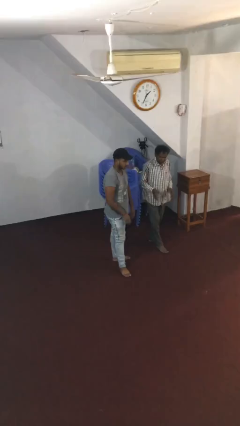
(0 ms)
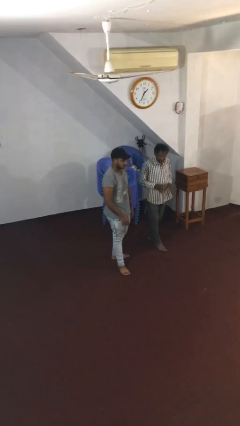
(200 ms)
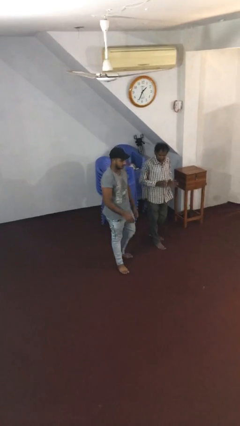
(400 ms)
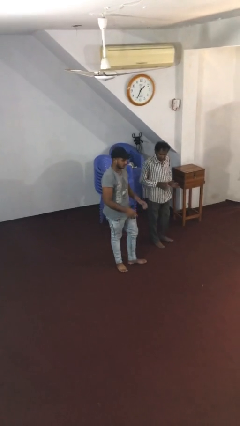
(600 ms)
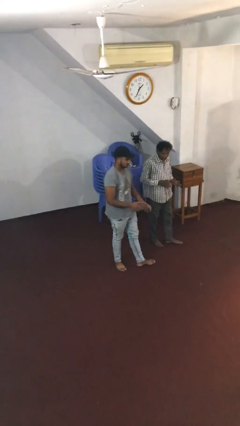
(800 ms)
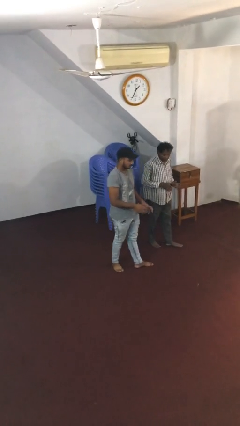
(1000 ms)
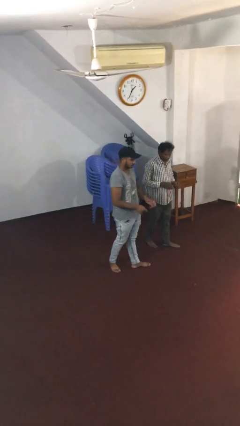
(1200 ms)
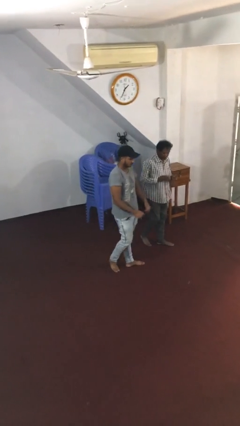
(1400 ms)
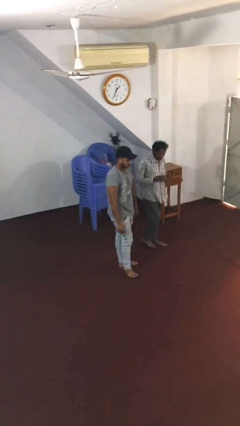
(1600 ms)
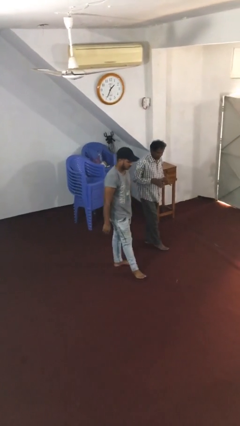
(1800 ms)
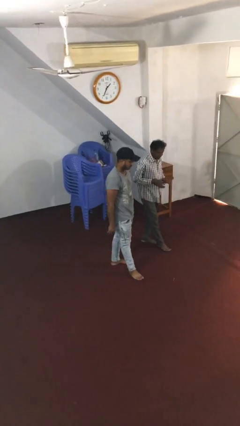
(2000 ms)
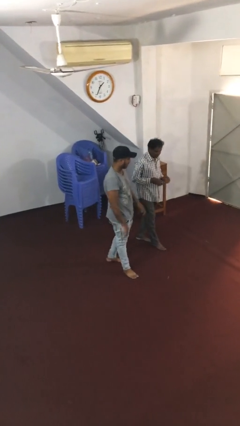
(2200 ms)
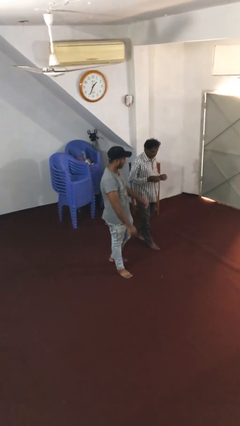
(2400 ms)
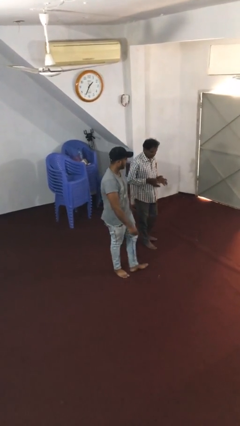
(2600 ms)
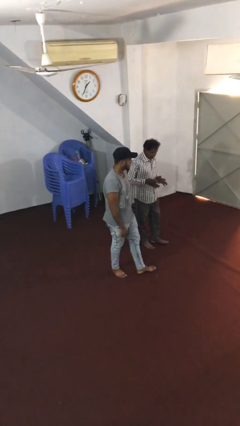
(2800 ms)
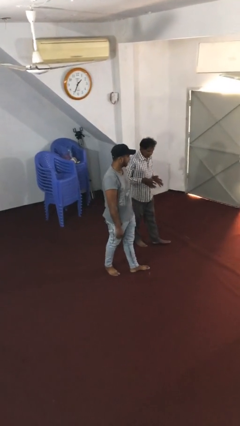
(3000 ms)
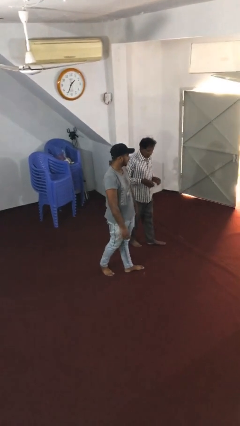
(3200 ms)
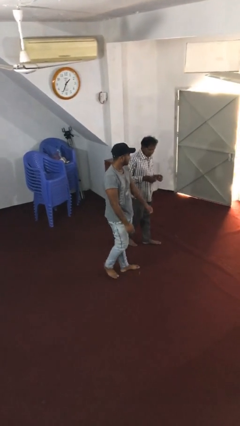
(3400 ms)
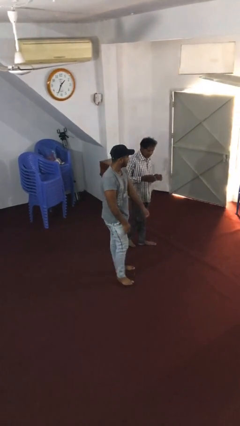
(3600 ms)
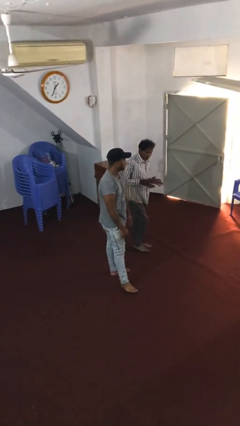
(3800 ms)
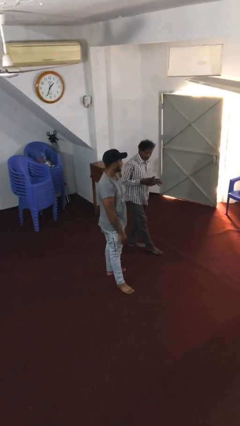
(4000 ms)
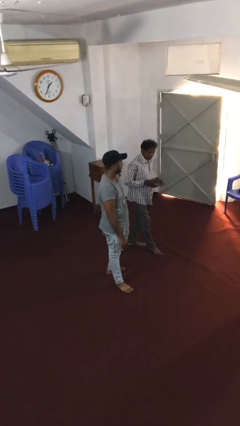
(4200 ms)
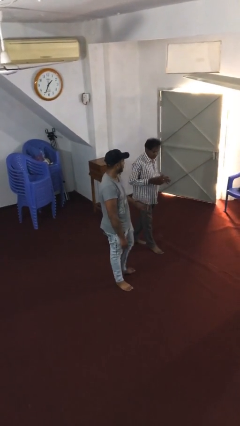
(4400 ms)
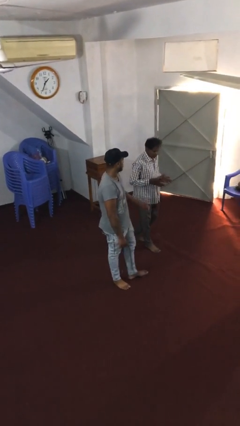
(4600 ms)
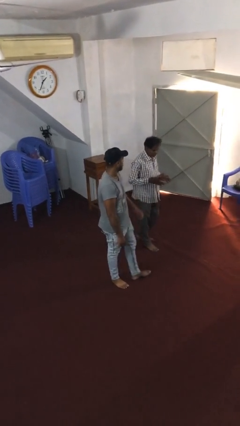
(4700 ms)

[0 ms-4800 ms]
person talks to person

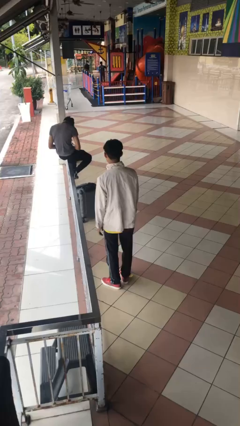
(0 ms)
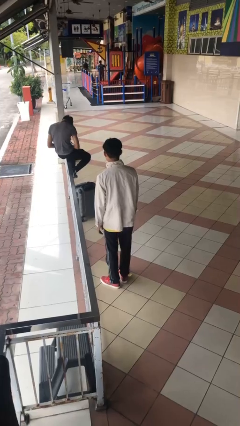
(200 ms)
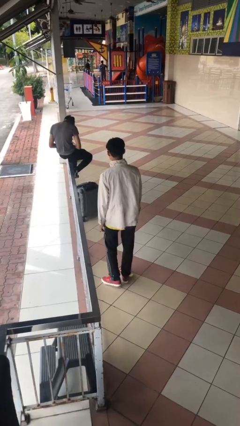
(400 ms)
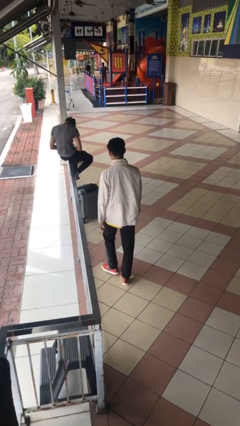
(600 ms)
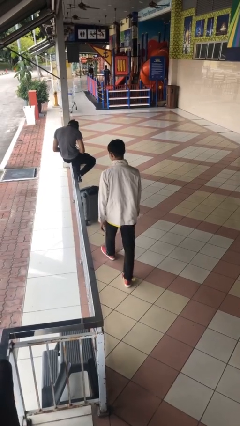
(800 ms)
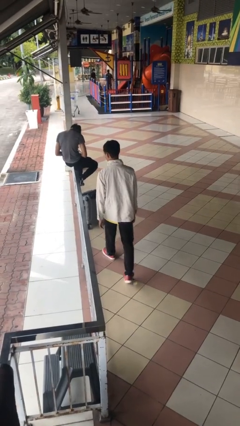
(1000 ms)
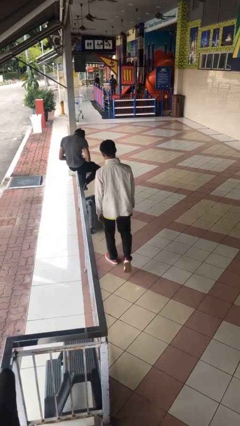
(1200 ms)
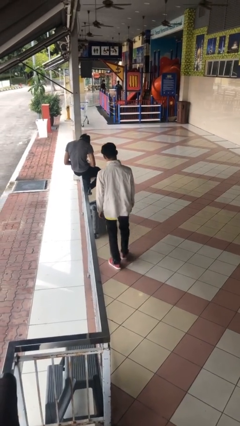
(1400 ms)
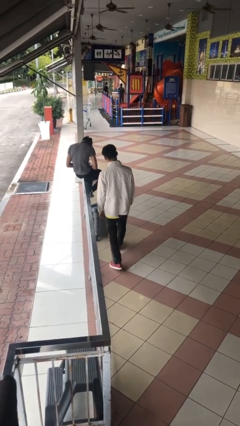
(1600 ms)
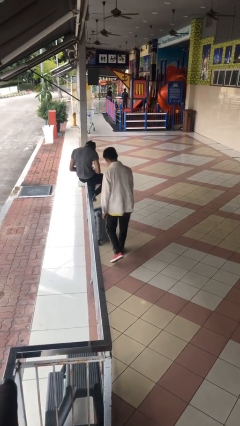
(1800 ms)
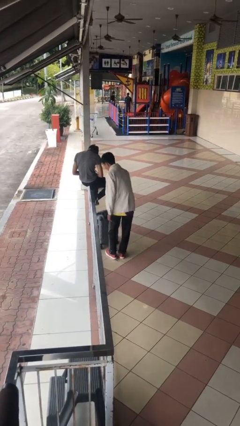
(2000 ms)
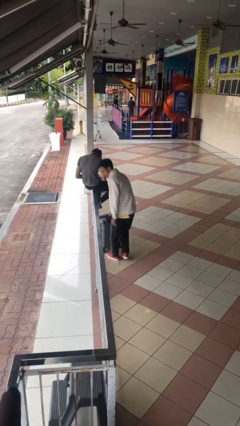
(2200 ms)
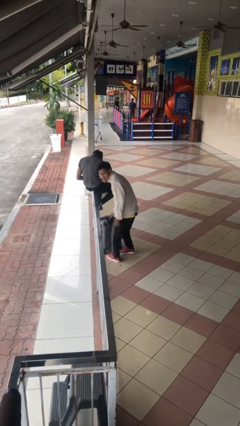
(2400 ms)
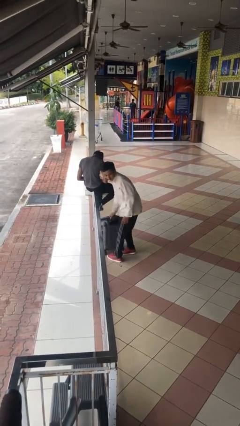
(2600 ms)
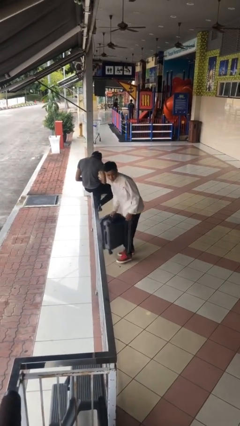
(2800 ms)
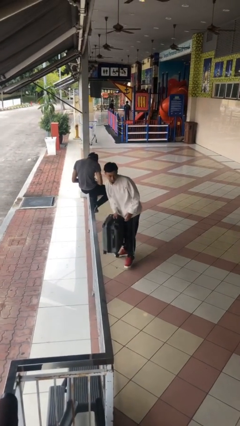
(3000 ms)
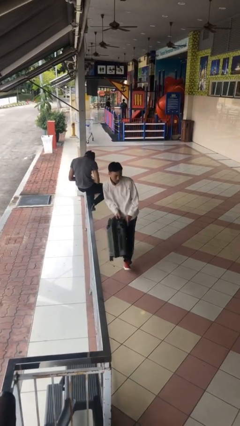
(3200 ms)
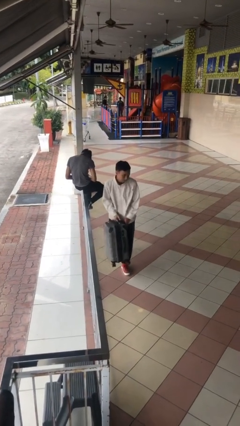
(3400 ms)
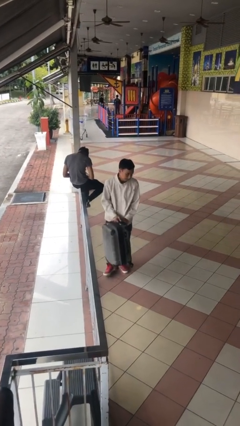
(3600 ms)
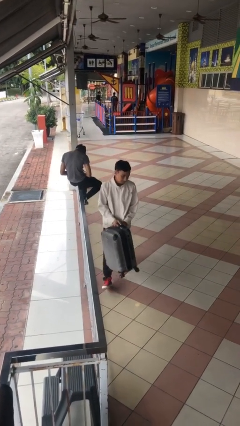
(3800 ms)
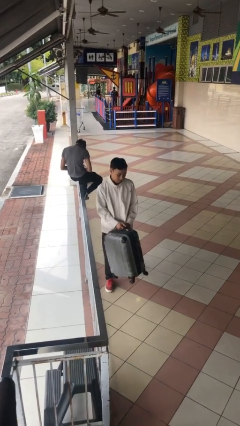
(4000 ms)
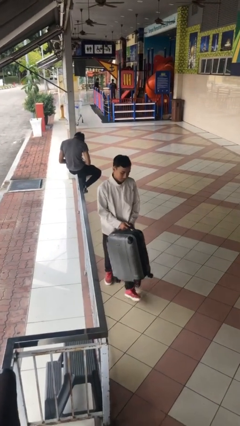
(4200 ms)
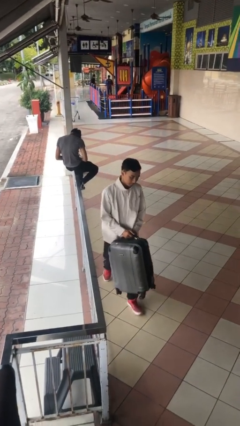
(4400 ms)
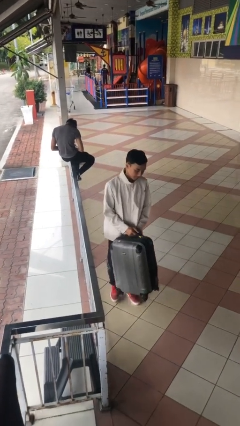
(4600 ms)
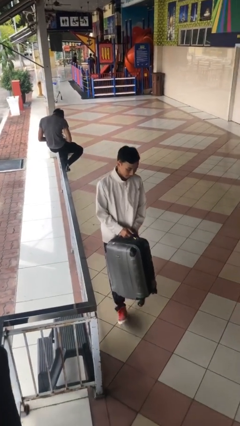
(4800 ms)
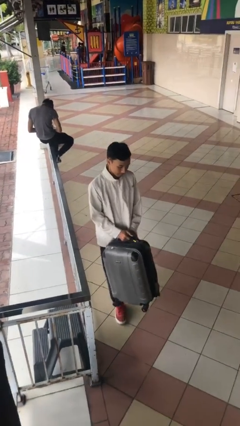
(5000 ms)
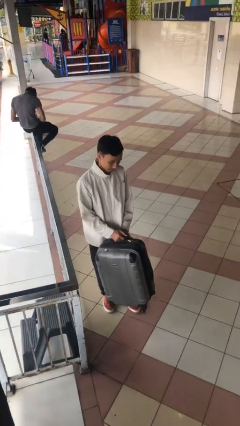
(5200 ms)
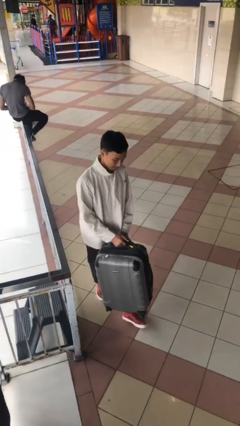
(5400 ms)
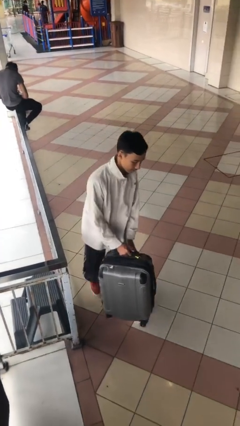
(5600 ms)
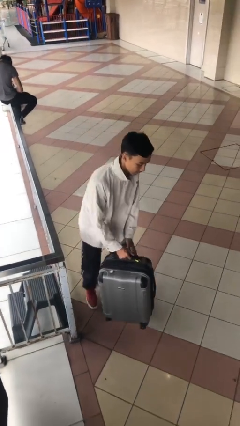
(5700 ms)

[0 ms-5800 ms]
person steals object from person

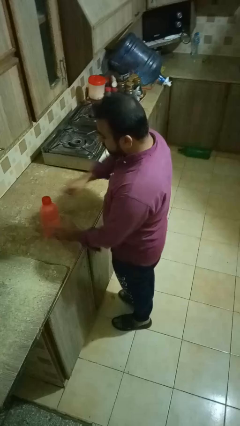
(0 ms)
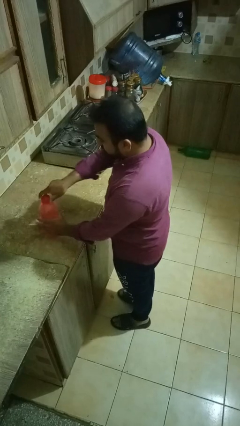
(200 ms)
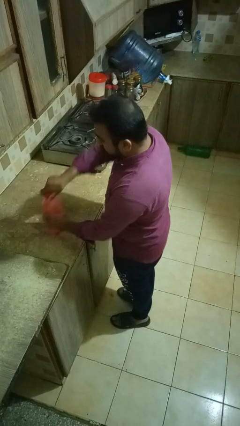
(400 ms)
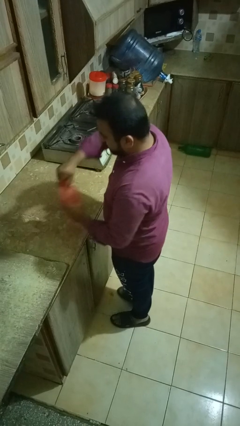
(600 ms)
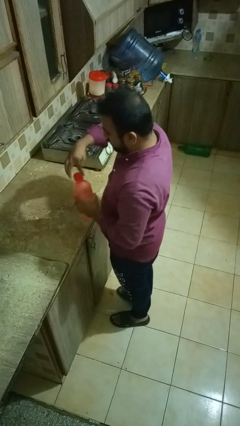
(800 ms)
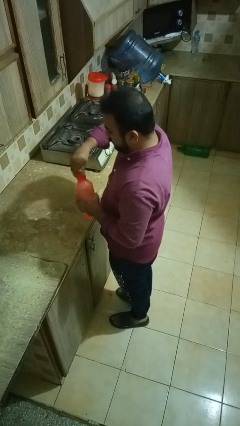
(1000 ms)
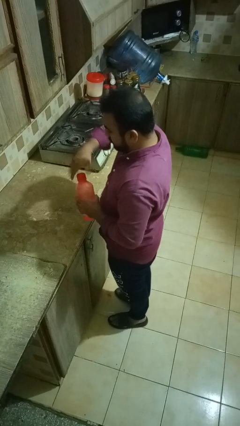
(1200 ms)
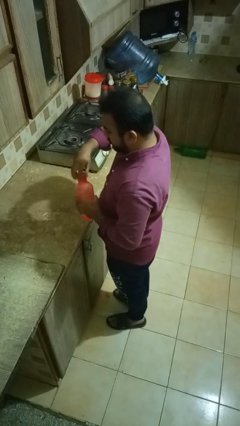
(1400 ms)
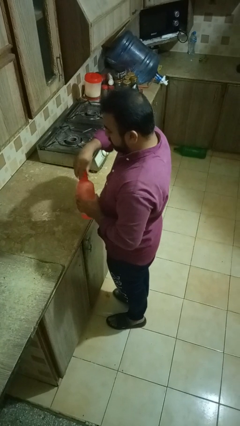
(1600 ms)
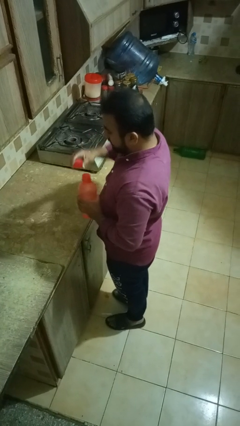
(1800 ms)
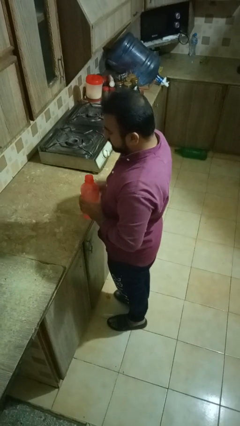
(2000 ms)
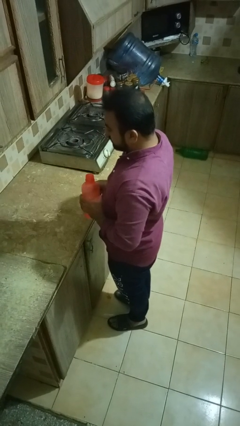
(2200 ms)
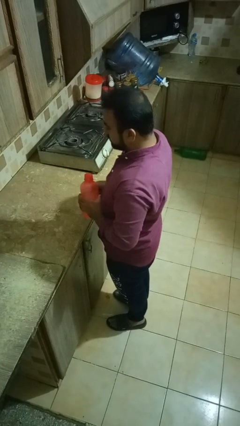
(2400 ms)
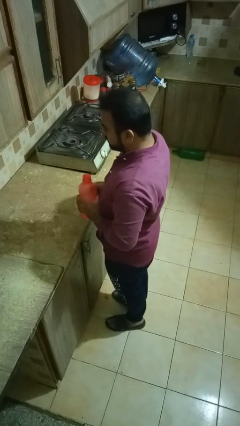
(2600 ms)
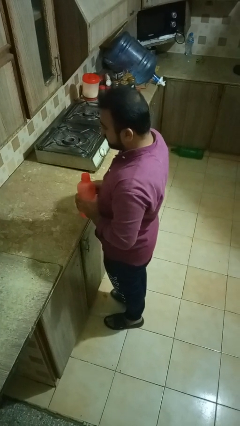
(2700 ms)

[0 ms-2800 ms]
person unscrews lid from bottle

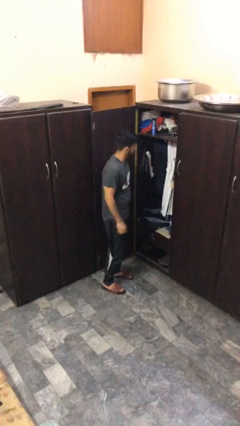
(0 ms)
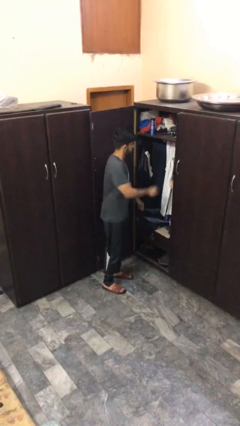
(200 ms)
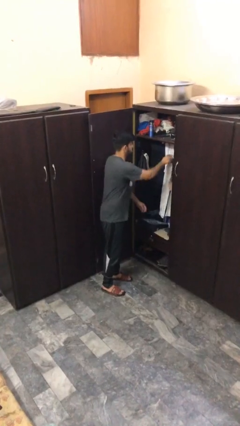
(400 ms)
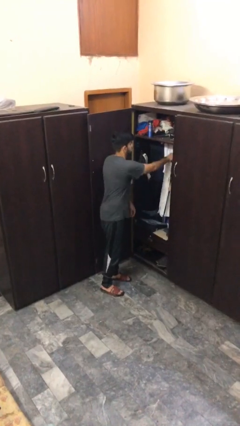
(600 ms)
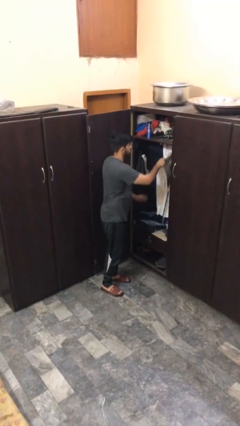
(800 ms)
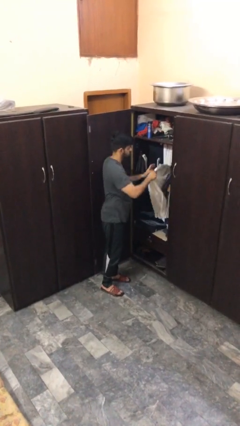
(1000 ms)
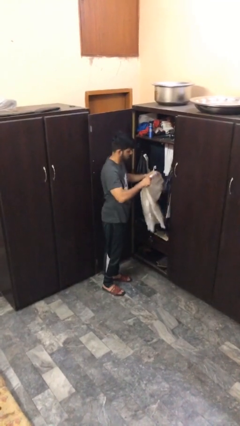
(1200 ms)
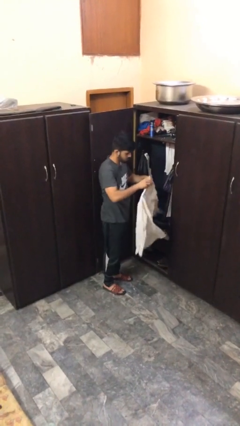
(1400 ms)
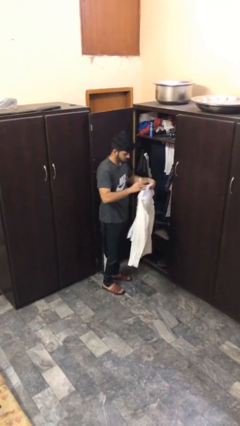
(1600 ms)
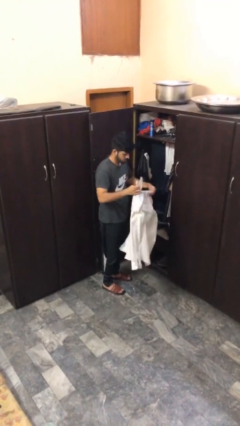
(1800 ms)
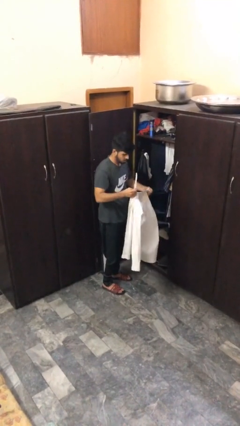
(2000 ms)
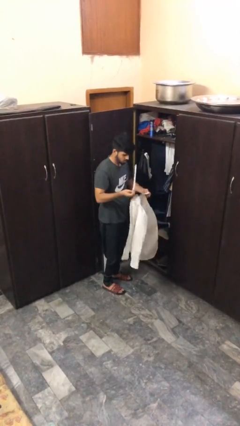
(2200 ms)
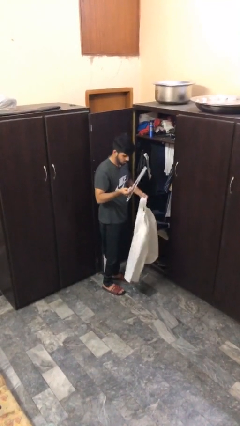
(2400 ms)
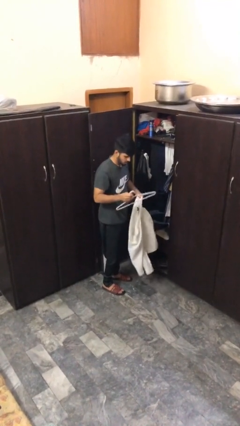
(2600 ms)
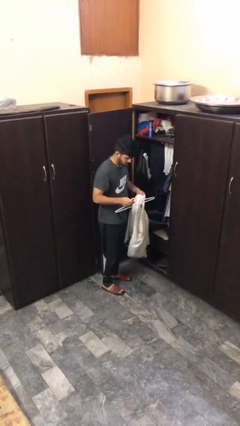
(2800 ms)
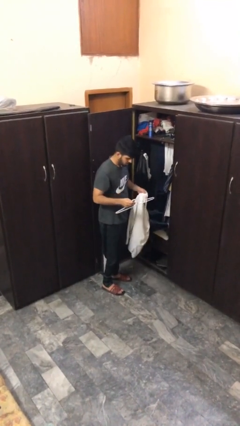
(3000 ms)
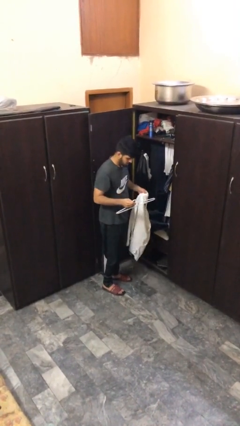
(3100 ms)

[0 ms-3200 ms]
person takes clothes from closet

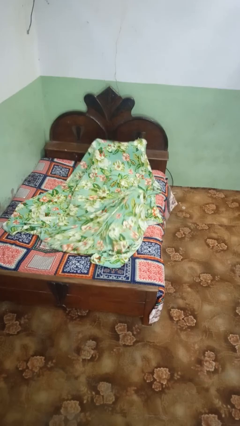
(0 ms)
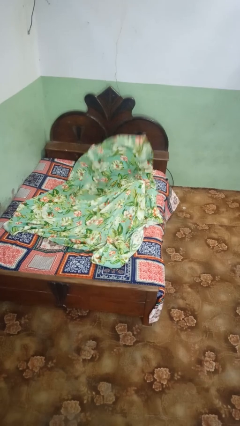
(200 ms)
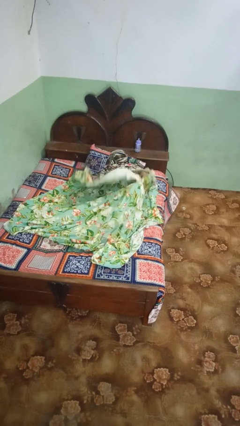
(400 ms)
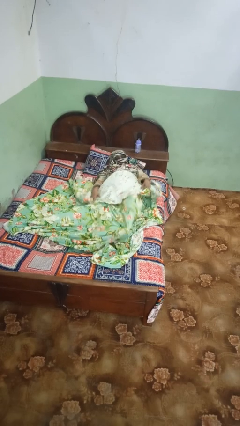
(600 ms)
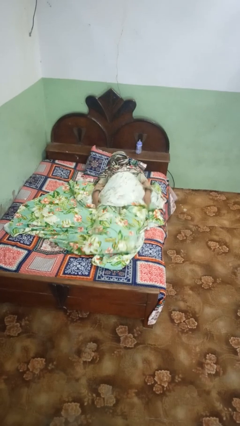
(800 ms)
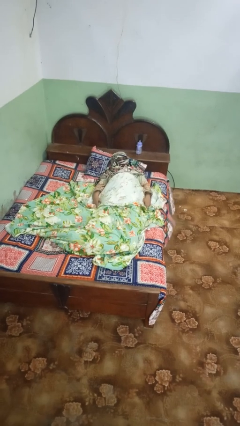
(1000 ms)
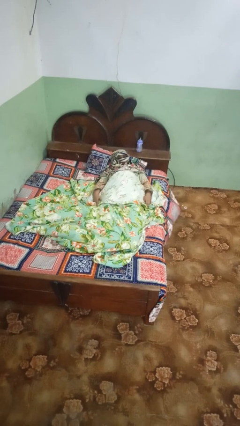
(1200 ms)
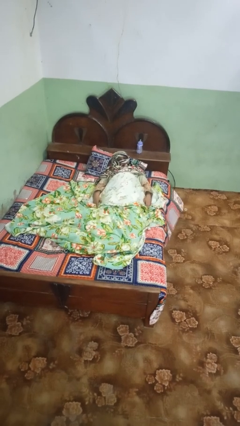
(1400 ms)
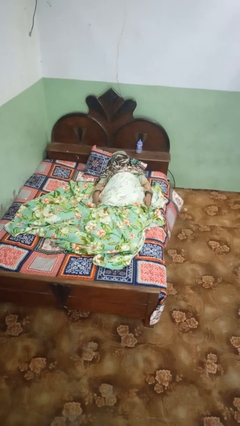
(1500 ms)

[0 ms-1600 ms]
person uncovers with bedsheets
